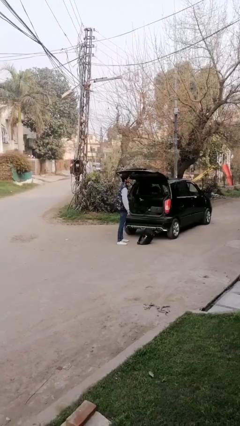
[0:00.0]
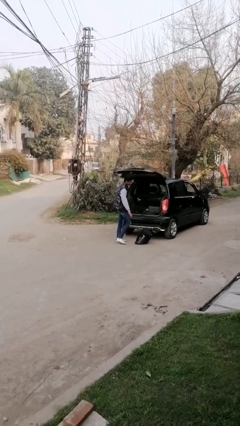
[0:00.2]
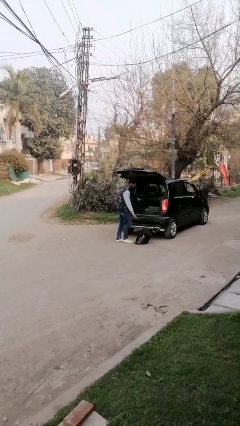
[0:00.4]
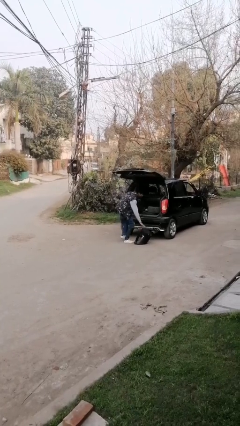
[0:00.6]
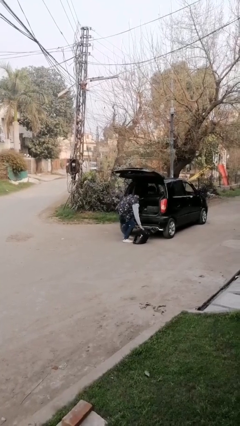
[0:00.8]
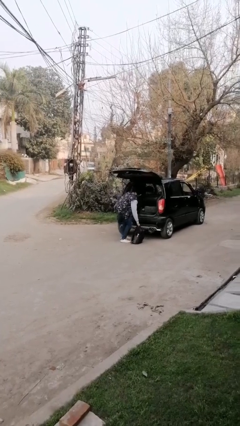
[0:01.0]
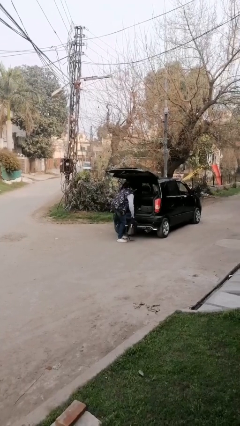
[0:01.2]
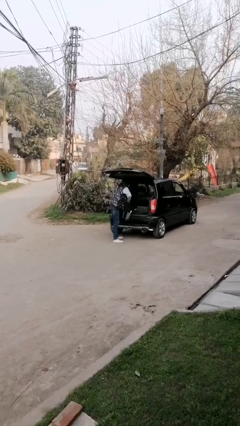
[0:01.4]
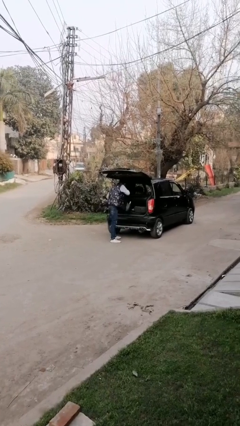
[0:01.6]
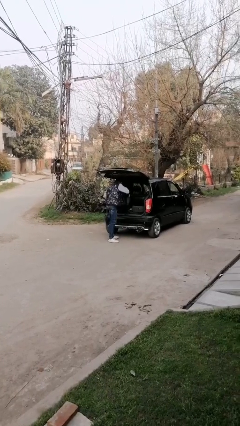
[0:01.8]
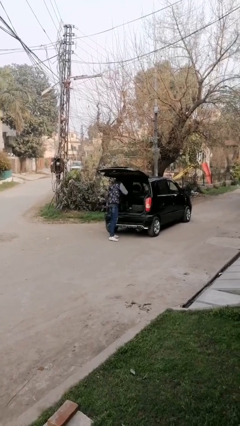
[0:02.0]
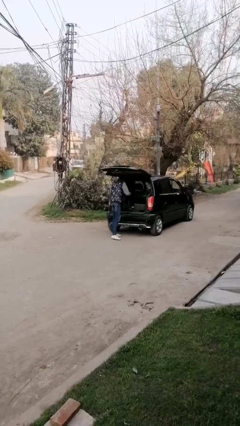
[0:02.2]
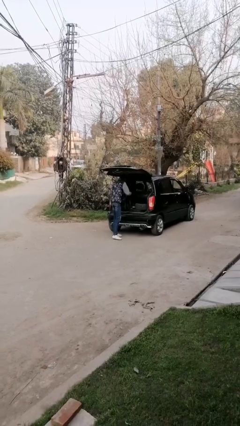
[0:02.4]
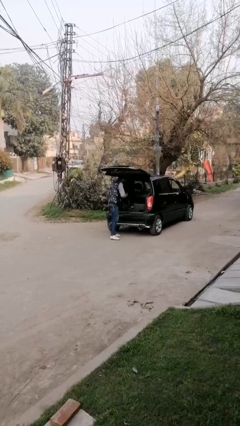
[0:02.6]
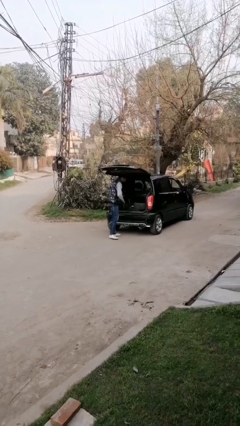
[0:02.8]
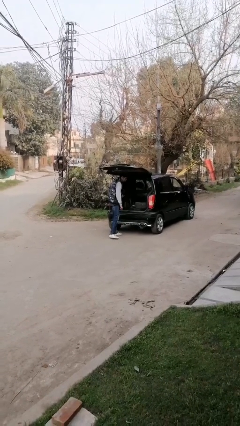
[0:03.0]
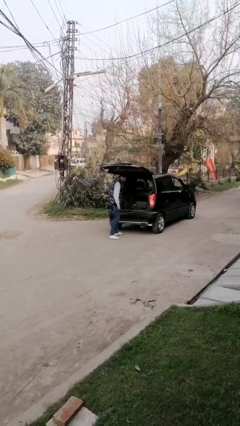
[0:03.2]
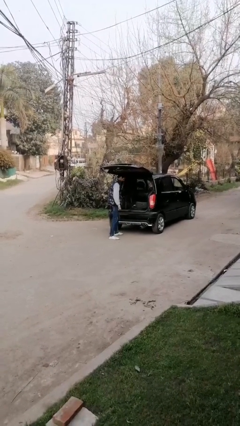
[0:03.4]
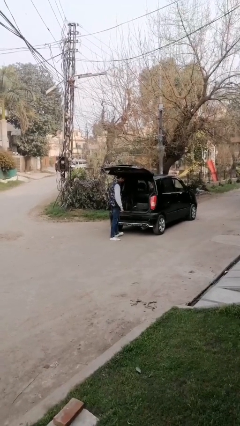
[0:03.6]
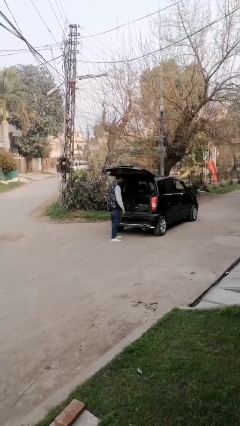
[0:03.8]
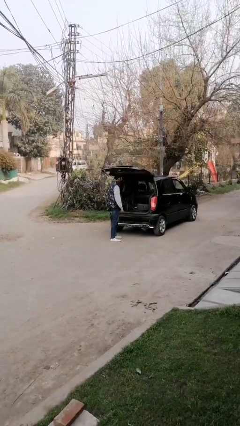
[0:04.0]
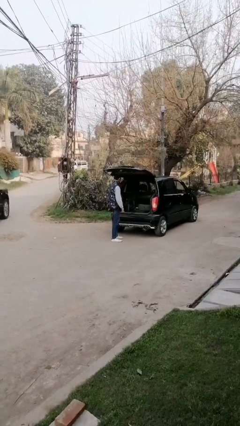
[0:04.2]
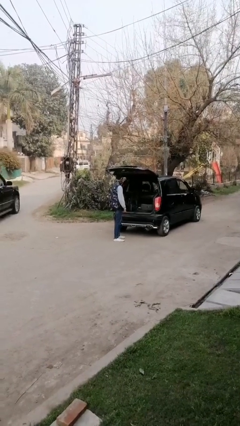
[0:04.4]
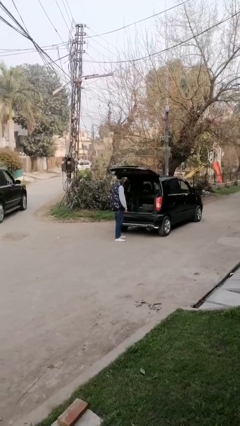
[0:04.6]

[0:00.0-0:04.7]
person loads car

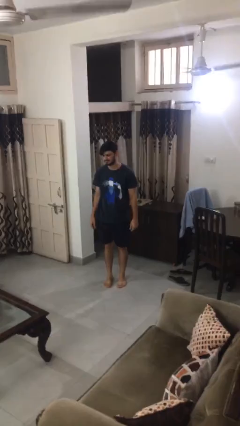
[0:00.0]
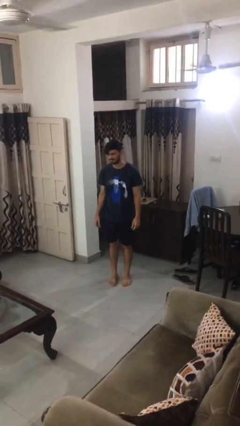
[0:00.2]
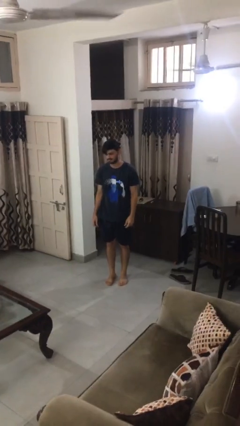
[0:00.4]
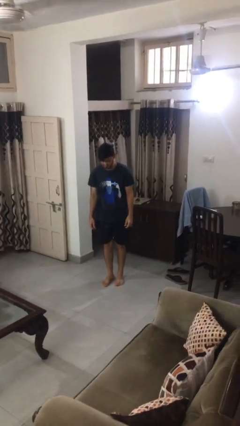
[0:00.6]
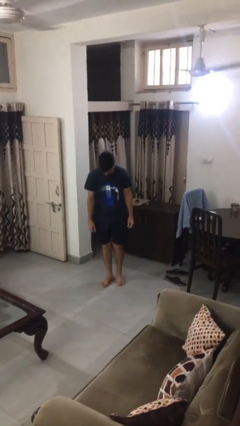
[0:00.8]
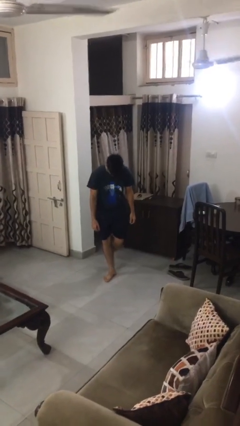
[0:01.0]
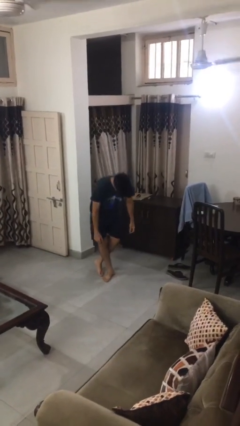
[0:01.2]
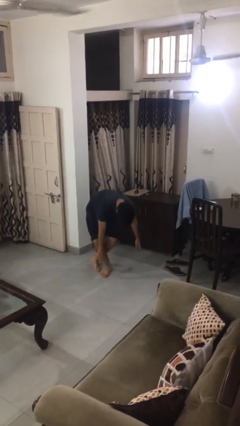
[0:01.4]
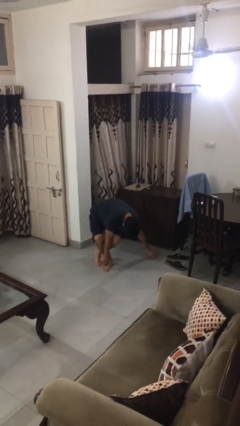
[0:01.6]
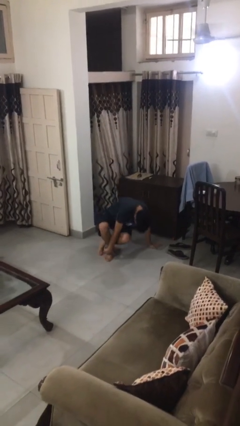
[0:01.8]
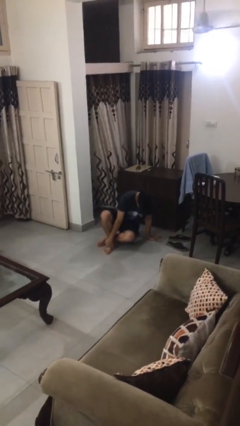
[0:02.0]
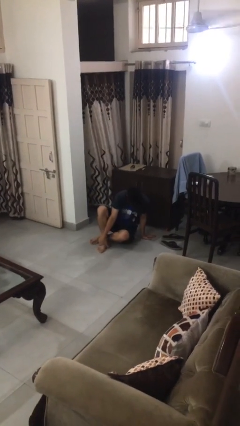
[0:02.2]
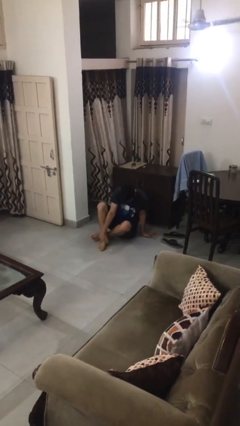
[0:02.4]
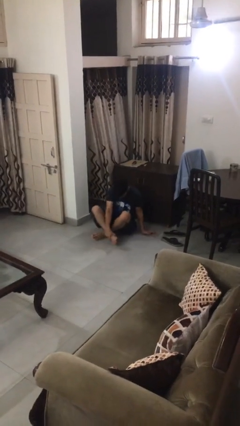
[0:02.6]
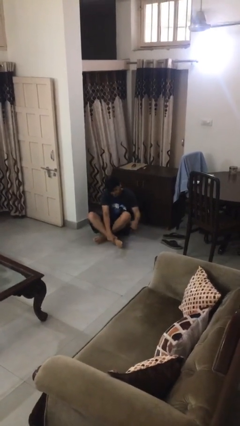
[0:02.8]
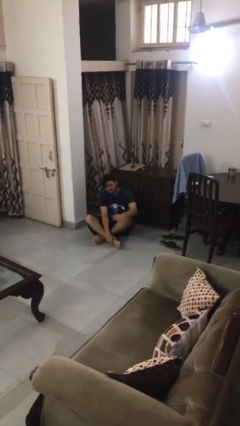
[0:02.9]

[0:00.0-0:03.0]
person sits crisscross

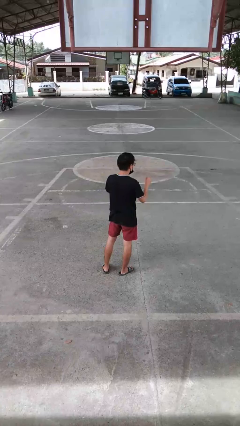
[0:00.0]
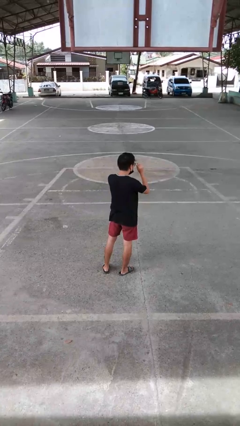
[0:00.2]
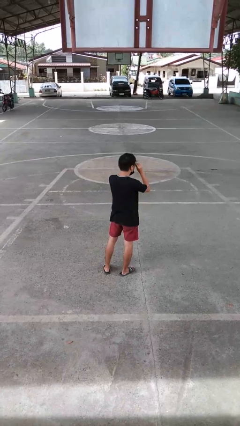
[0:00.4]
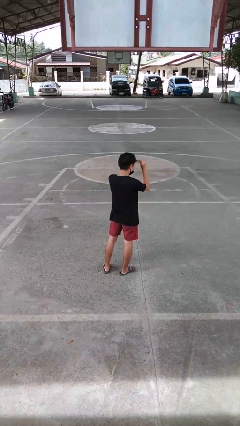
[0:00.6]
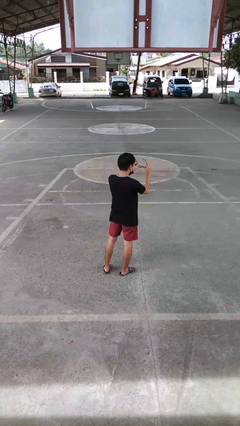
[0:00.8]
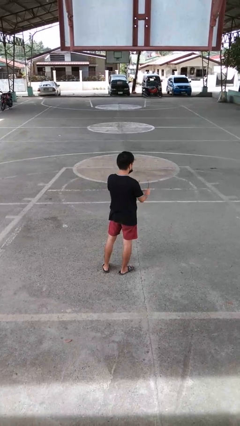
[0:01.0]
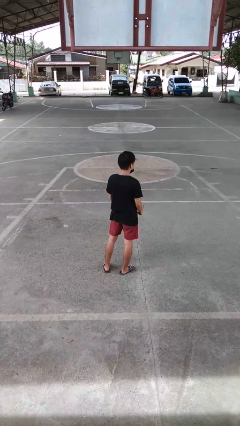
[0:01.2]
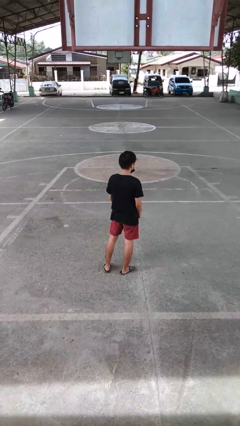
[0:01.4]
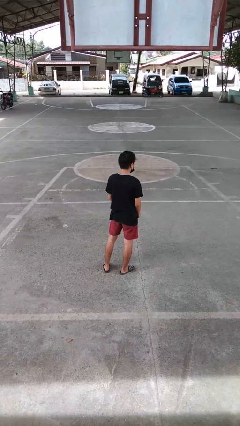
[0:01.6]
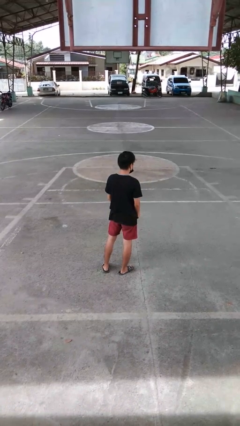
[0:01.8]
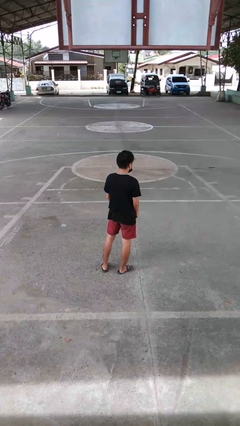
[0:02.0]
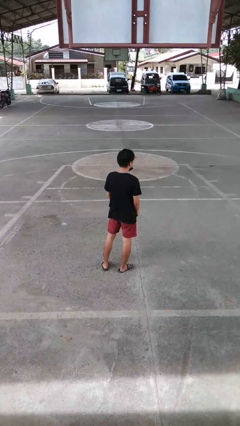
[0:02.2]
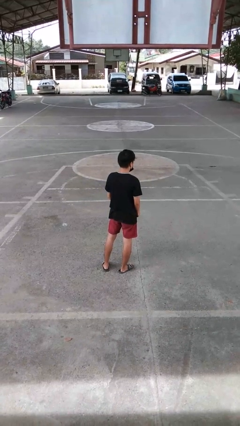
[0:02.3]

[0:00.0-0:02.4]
person takes off glasses

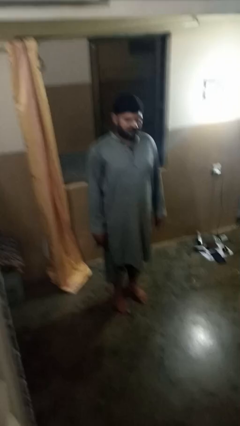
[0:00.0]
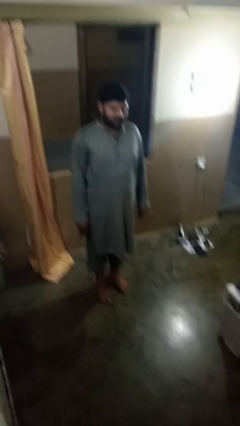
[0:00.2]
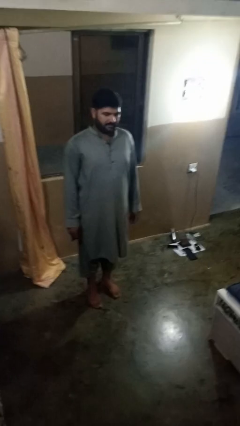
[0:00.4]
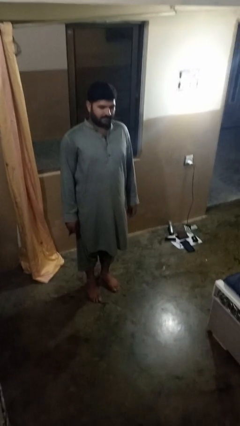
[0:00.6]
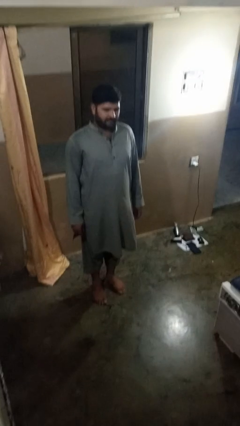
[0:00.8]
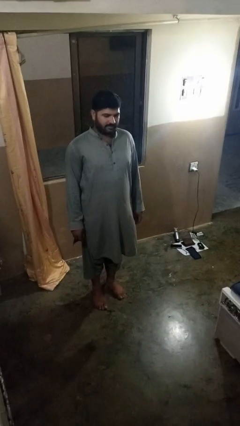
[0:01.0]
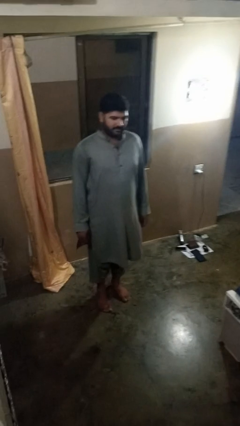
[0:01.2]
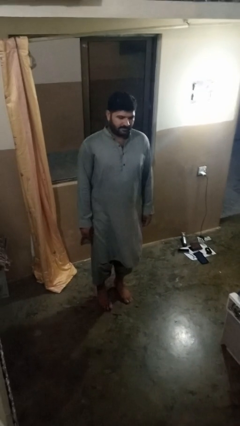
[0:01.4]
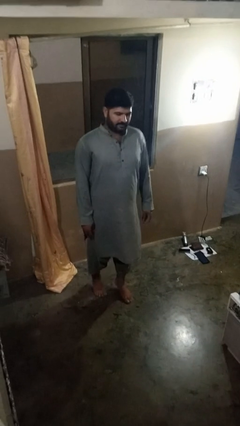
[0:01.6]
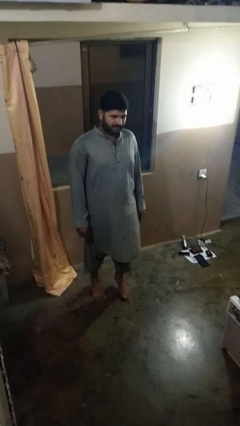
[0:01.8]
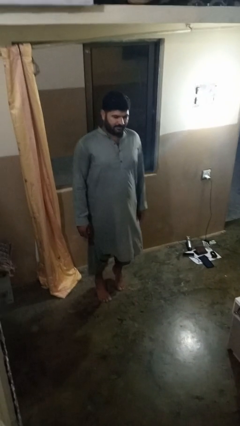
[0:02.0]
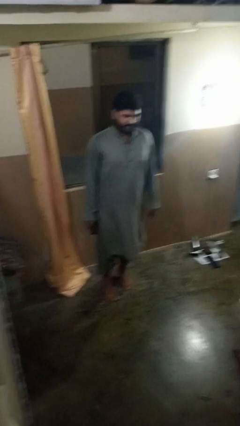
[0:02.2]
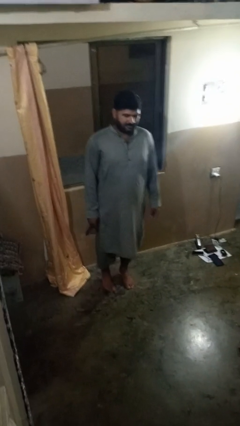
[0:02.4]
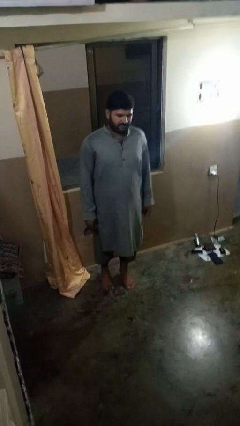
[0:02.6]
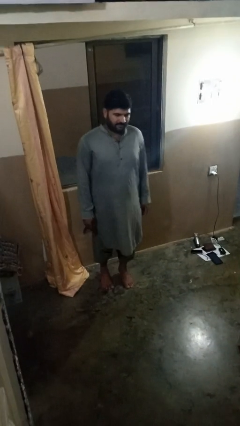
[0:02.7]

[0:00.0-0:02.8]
person walks tiptoe

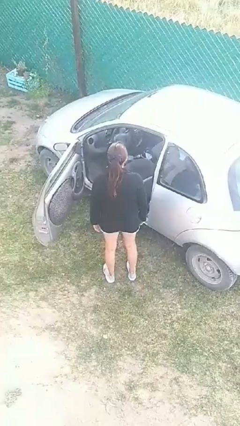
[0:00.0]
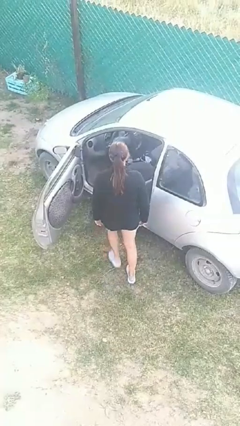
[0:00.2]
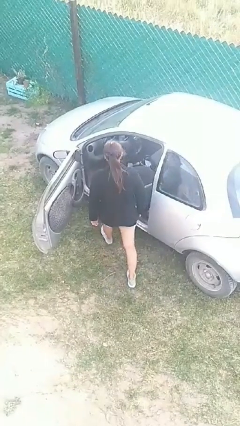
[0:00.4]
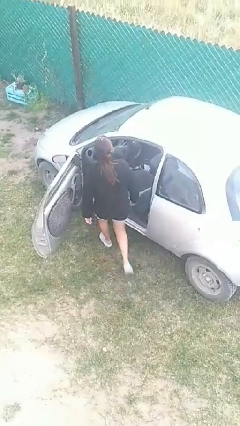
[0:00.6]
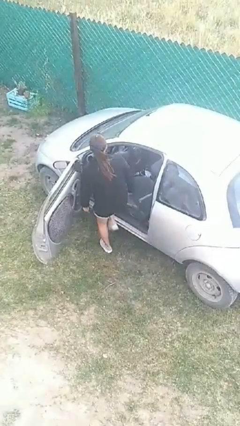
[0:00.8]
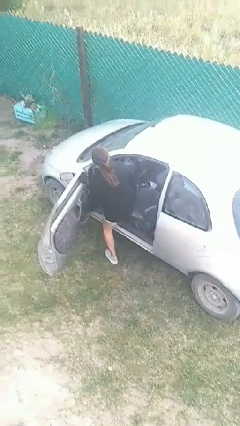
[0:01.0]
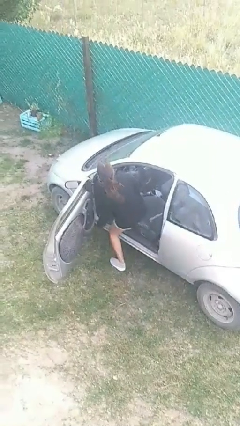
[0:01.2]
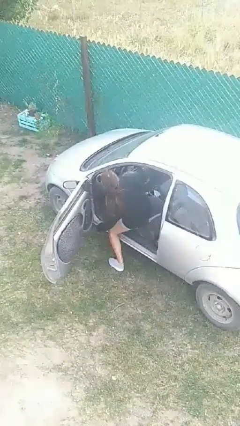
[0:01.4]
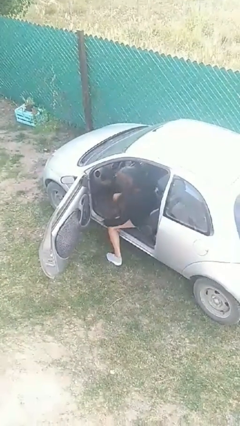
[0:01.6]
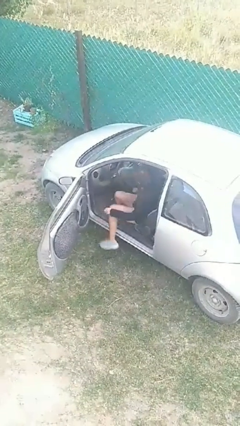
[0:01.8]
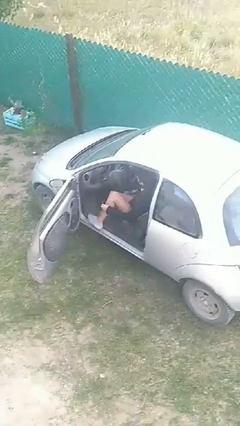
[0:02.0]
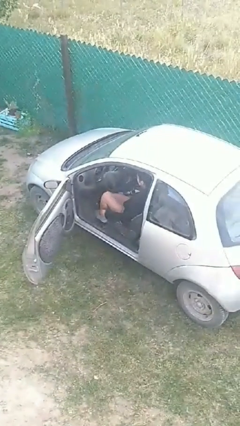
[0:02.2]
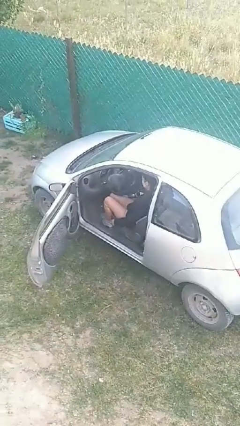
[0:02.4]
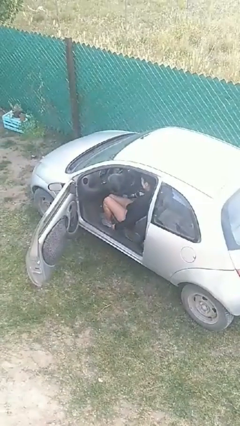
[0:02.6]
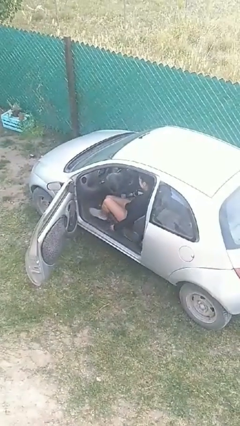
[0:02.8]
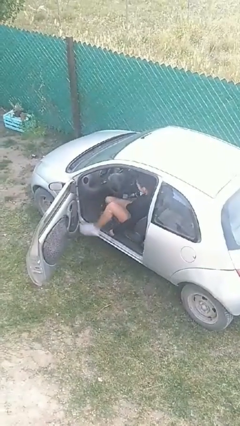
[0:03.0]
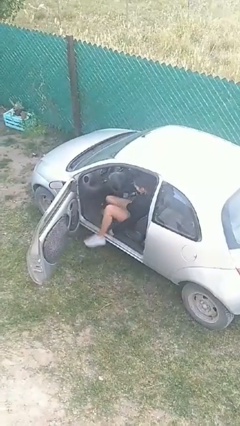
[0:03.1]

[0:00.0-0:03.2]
person enters car

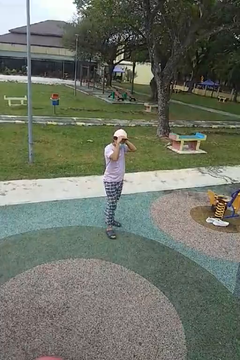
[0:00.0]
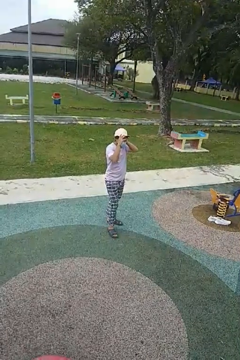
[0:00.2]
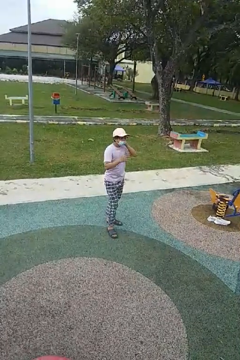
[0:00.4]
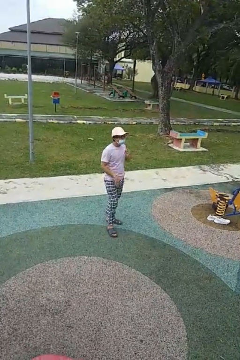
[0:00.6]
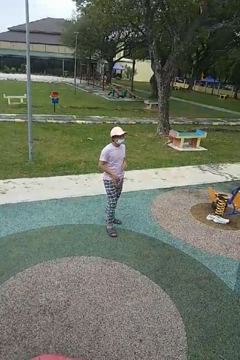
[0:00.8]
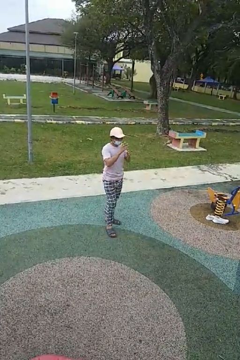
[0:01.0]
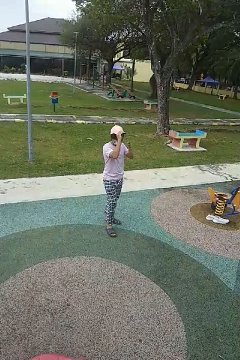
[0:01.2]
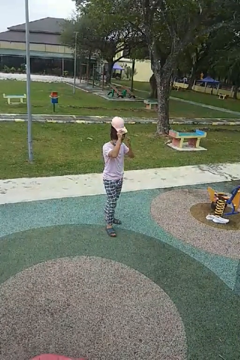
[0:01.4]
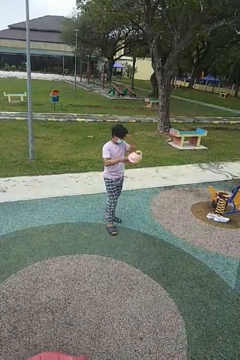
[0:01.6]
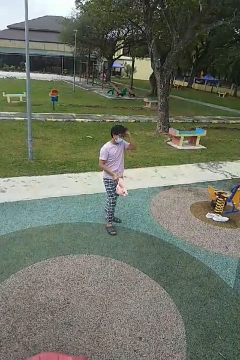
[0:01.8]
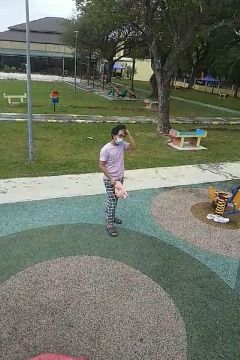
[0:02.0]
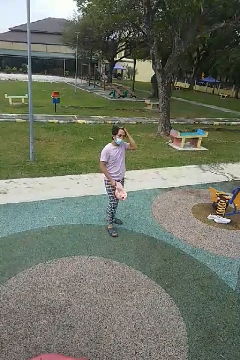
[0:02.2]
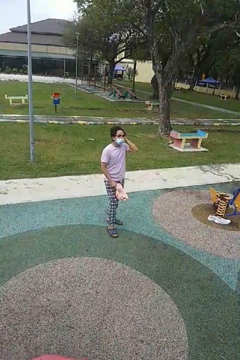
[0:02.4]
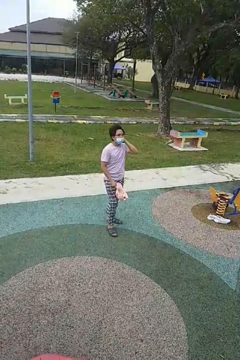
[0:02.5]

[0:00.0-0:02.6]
person takes off hat
